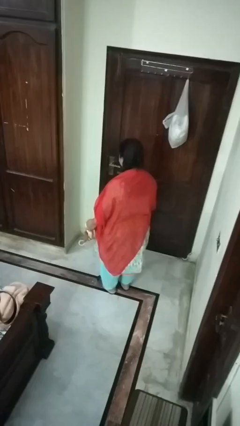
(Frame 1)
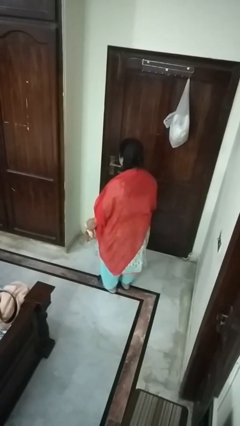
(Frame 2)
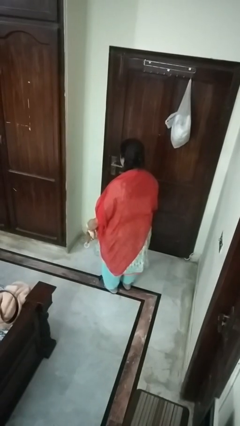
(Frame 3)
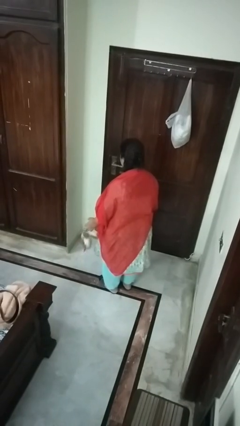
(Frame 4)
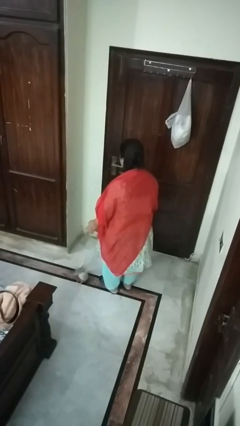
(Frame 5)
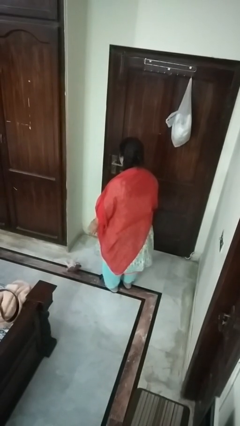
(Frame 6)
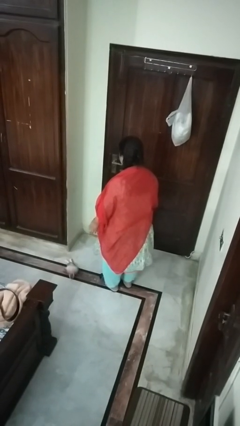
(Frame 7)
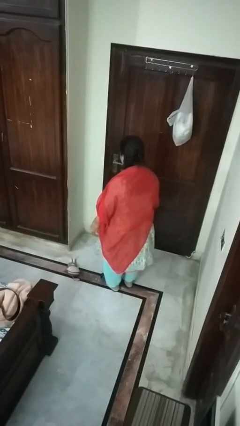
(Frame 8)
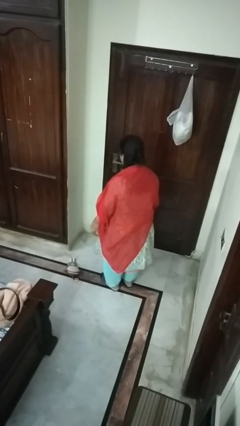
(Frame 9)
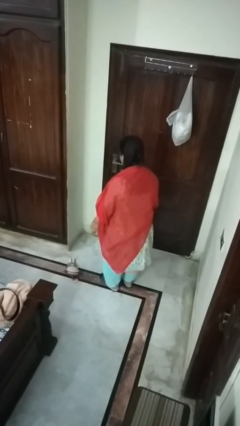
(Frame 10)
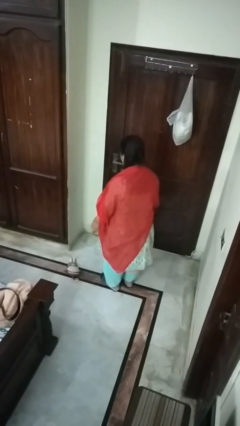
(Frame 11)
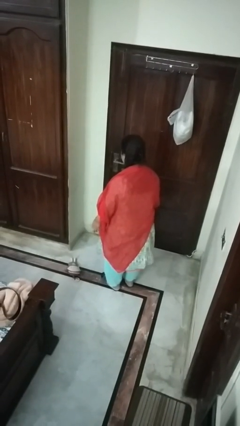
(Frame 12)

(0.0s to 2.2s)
person drops object

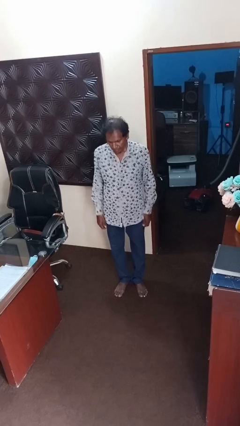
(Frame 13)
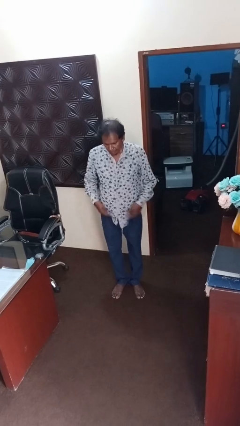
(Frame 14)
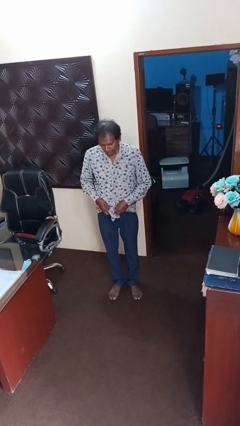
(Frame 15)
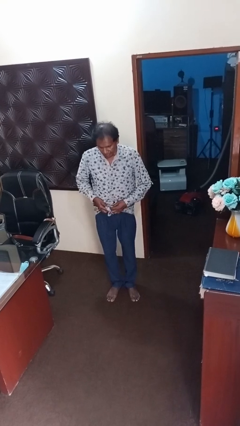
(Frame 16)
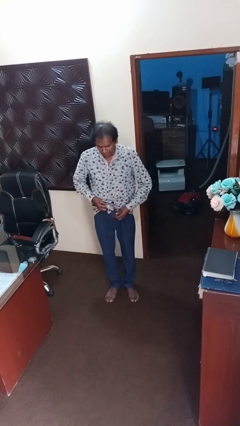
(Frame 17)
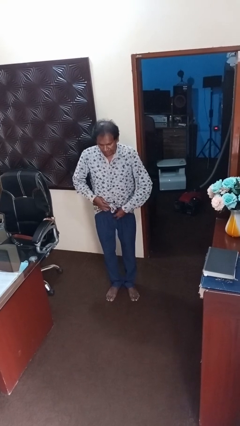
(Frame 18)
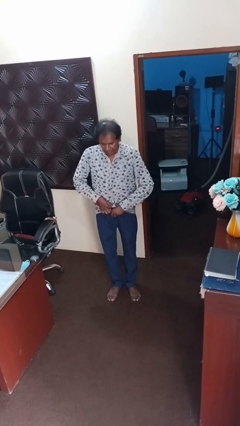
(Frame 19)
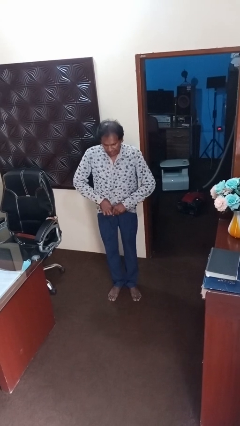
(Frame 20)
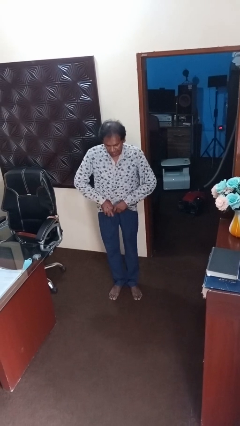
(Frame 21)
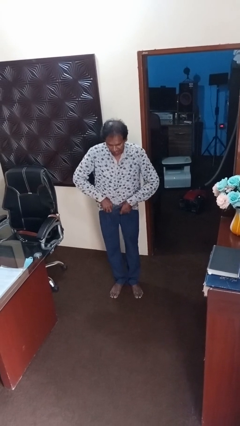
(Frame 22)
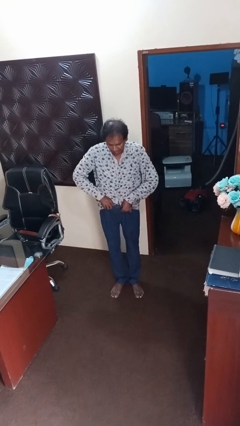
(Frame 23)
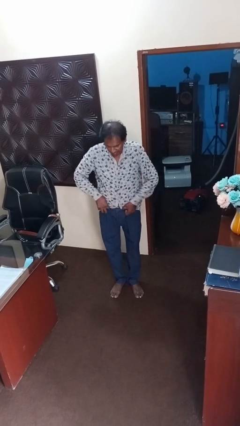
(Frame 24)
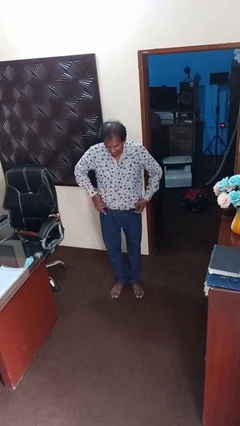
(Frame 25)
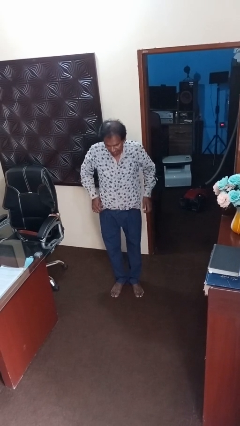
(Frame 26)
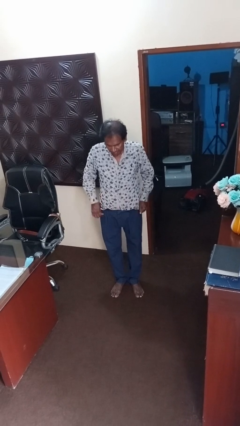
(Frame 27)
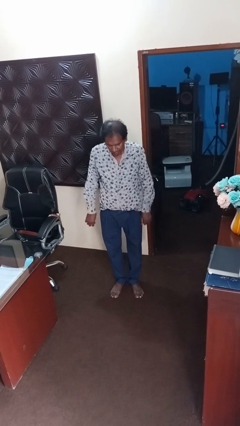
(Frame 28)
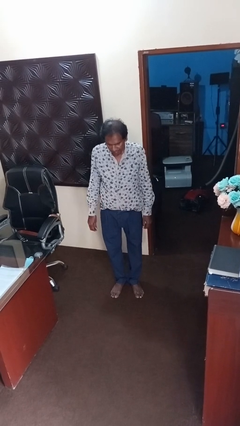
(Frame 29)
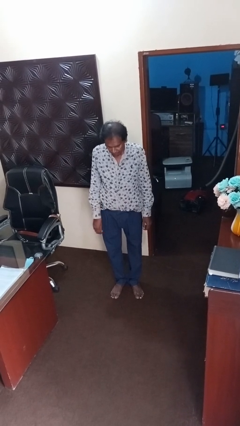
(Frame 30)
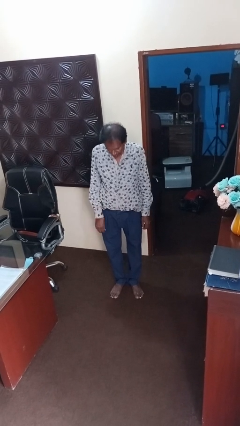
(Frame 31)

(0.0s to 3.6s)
person tucks in shirt

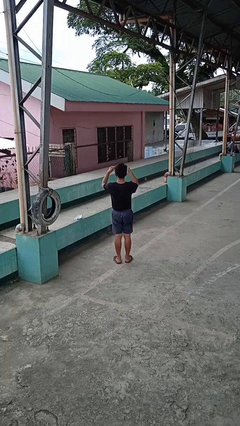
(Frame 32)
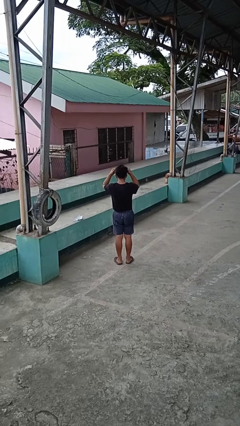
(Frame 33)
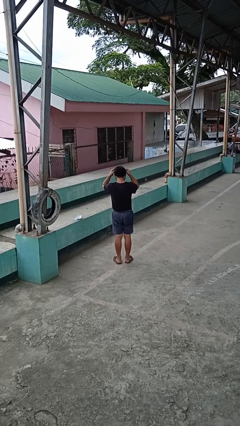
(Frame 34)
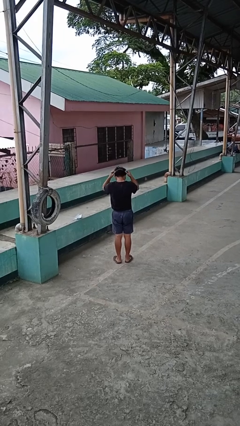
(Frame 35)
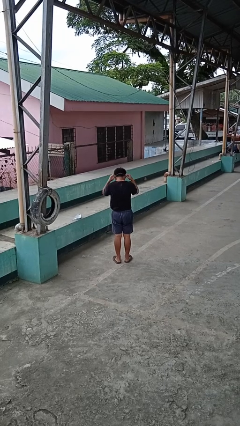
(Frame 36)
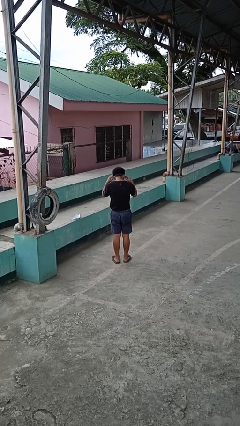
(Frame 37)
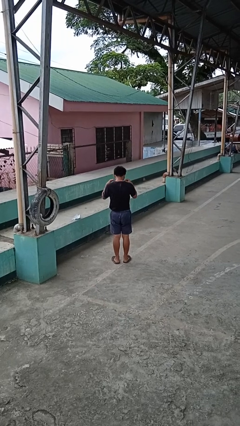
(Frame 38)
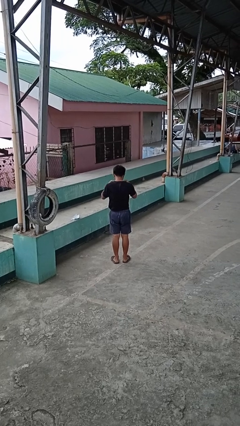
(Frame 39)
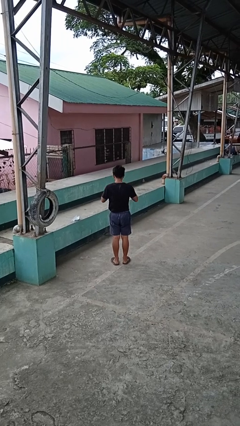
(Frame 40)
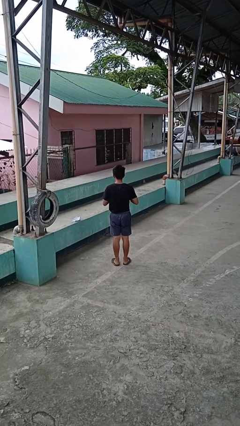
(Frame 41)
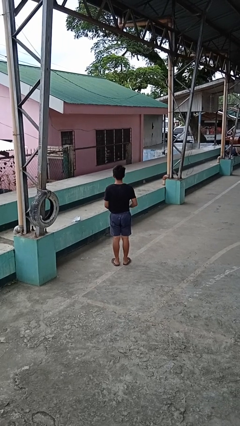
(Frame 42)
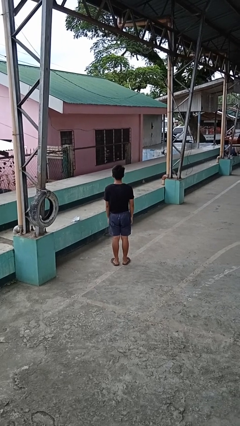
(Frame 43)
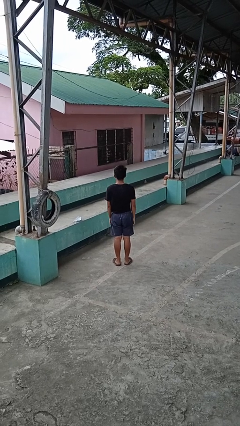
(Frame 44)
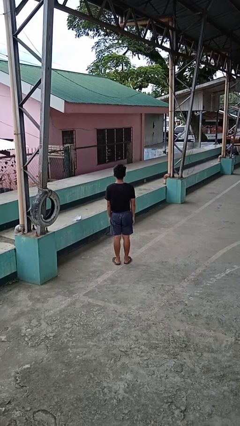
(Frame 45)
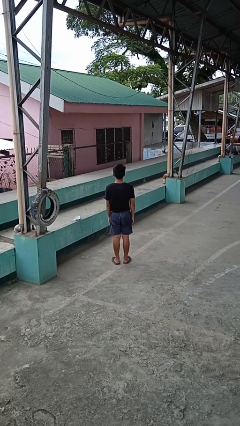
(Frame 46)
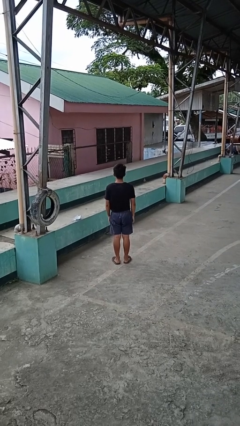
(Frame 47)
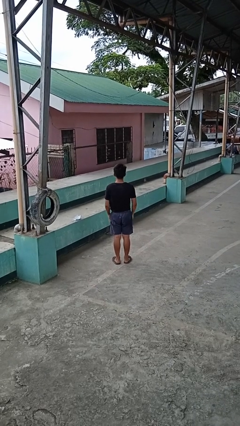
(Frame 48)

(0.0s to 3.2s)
person puts on necklace

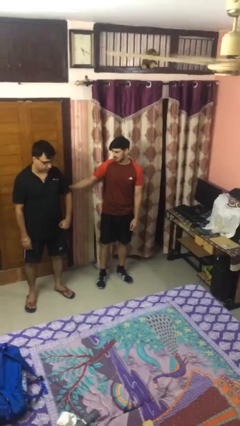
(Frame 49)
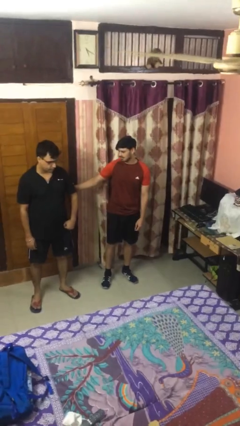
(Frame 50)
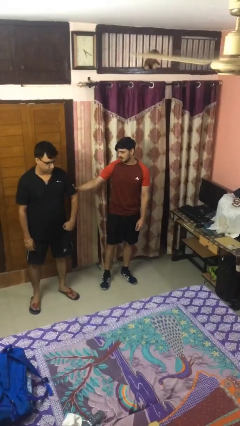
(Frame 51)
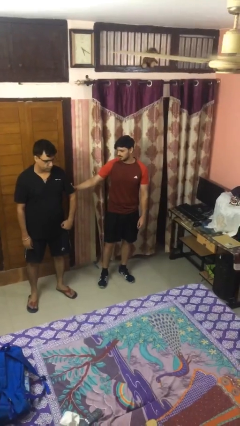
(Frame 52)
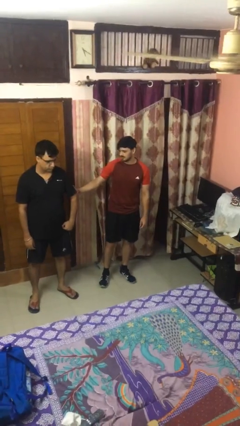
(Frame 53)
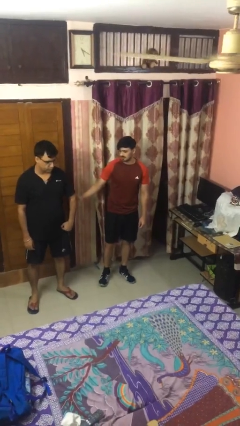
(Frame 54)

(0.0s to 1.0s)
person grabs person by bicep

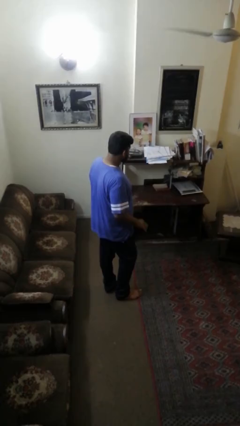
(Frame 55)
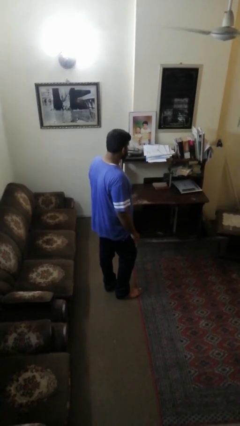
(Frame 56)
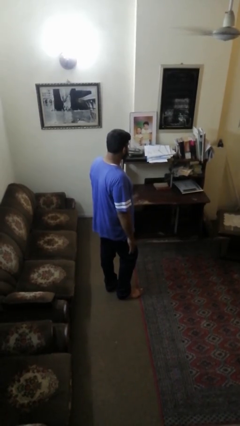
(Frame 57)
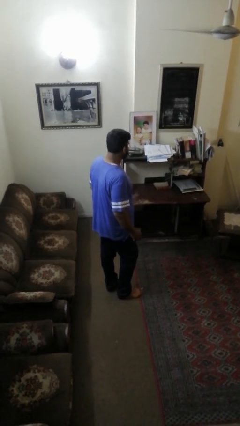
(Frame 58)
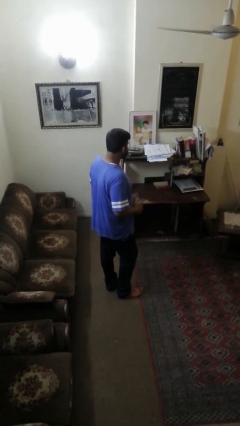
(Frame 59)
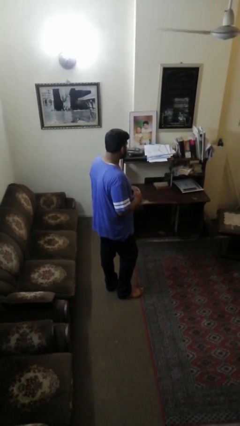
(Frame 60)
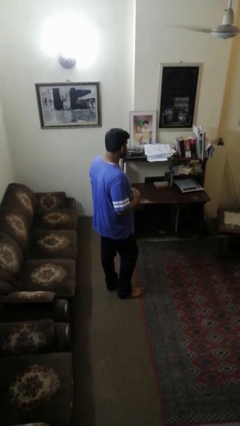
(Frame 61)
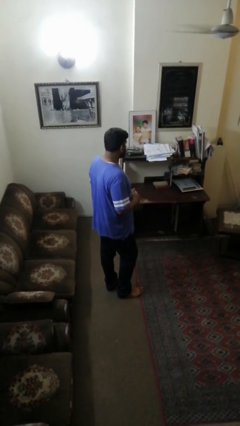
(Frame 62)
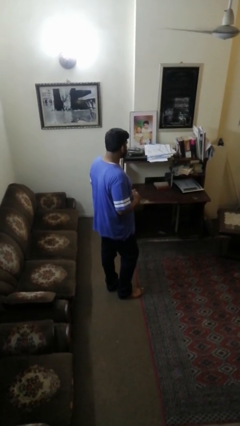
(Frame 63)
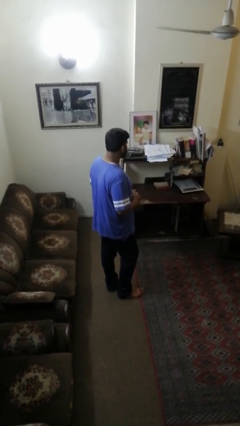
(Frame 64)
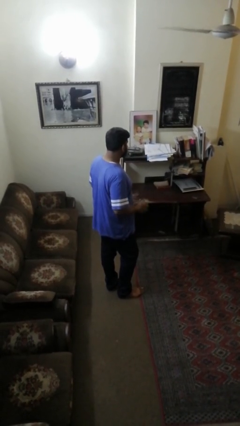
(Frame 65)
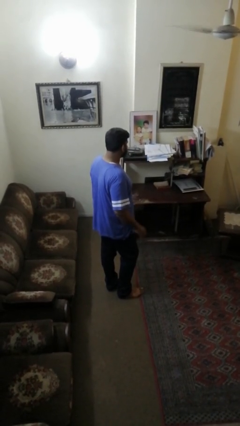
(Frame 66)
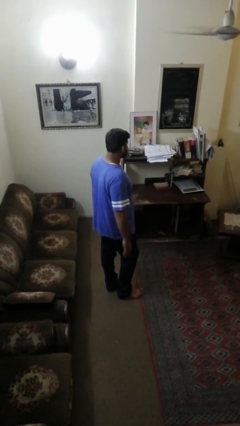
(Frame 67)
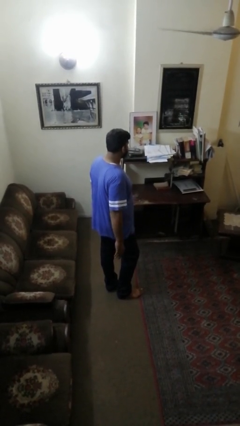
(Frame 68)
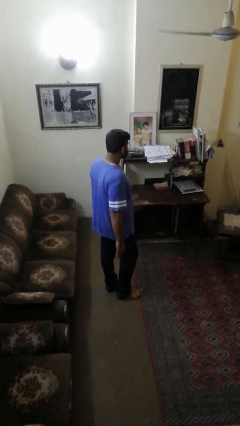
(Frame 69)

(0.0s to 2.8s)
person takes off ring

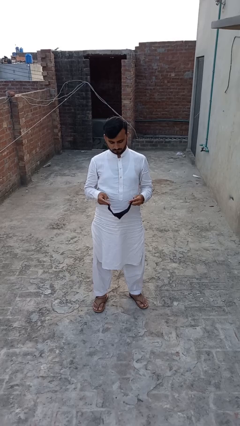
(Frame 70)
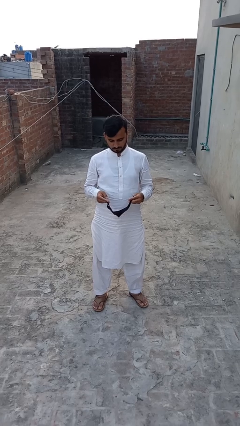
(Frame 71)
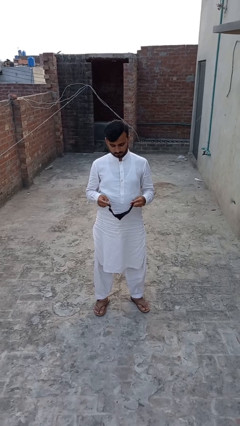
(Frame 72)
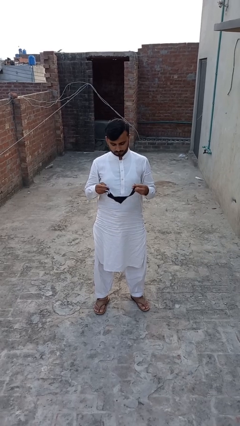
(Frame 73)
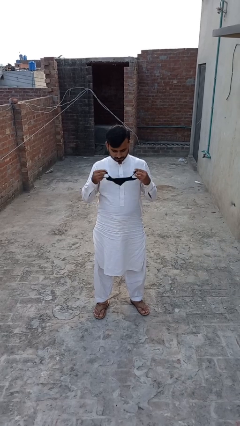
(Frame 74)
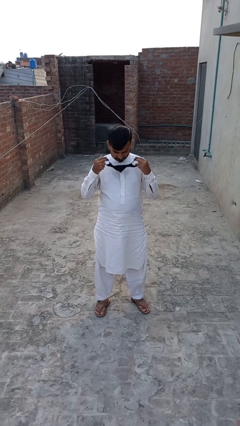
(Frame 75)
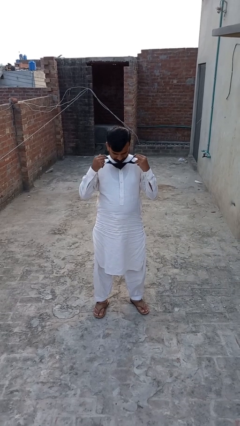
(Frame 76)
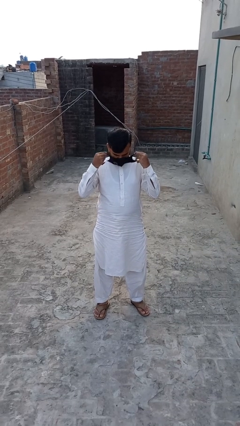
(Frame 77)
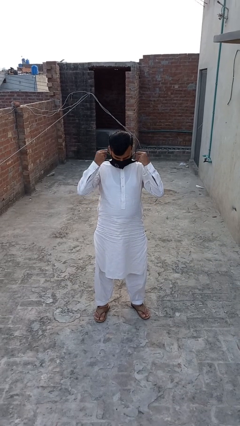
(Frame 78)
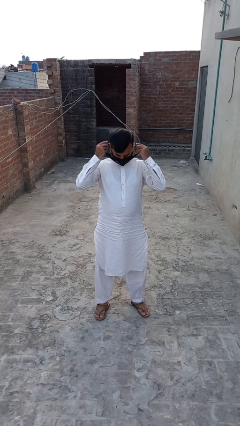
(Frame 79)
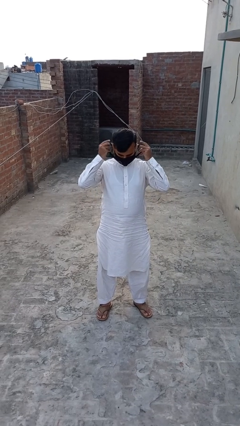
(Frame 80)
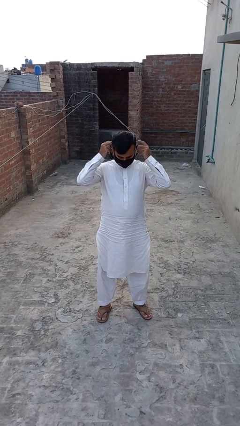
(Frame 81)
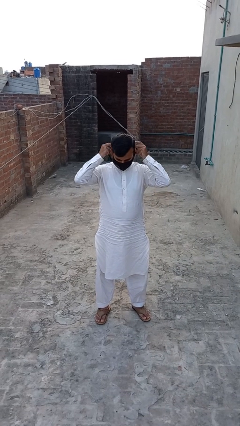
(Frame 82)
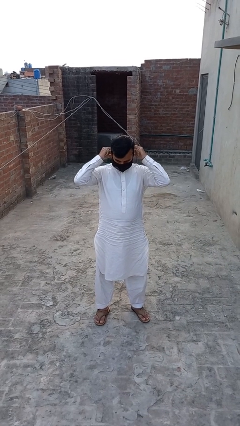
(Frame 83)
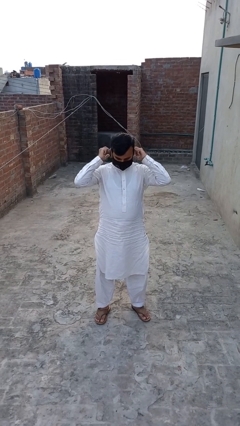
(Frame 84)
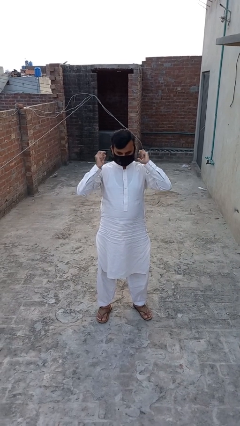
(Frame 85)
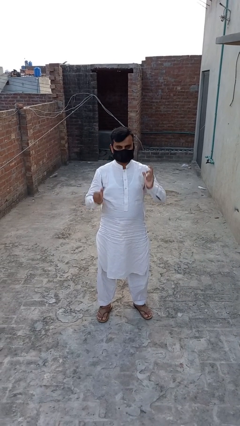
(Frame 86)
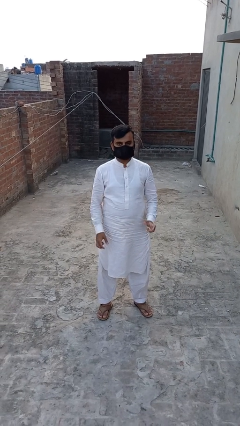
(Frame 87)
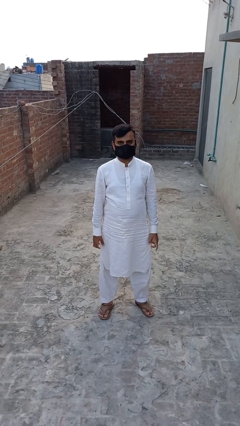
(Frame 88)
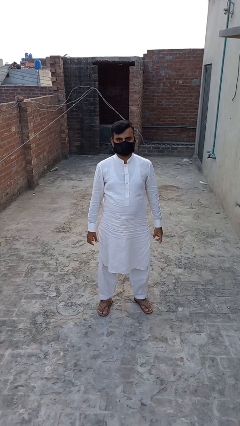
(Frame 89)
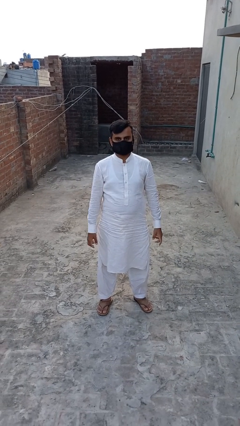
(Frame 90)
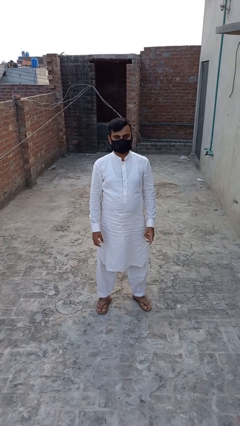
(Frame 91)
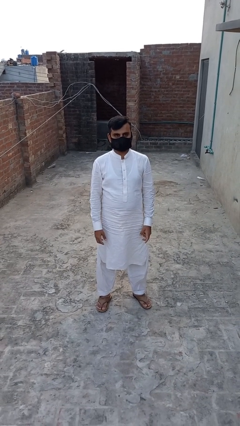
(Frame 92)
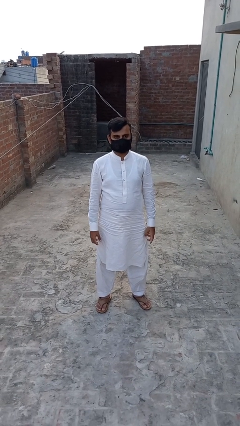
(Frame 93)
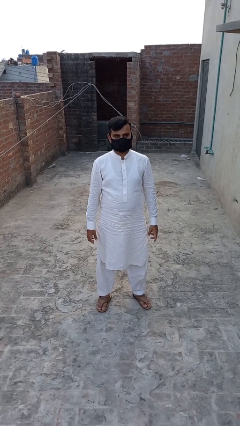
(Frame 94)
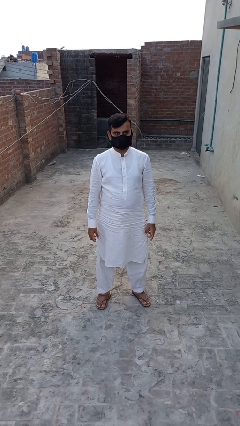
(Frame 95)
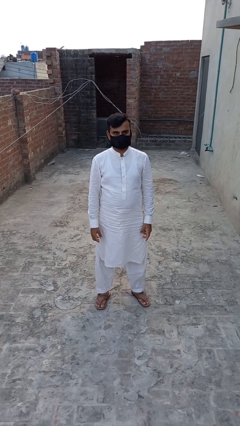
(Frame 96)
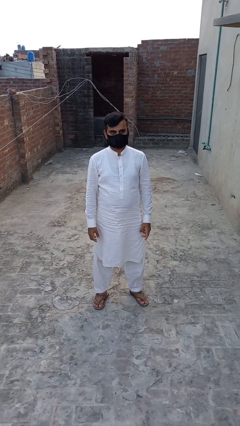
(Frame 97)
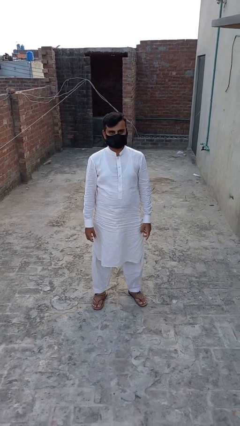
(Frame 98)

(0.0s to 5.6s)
person puts on facemask
